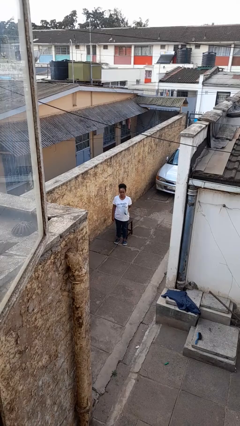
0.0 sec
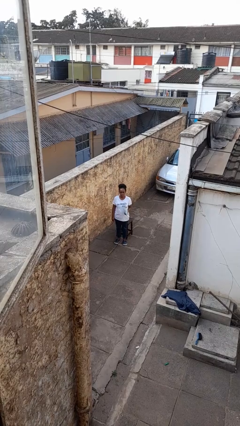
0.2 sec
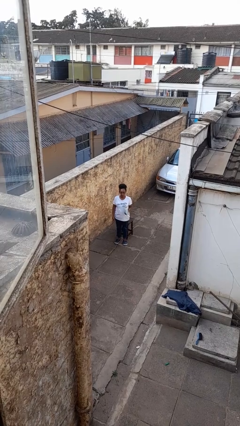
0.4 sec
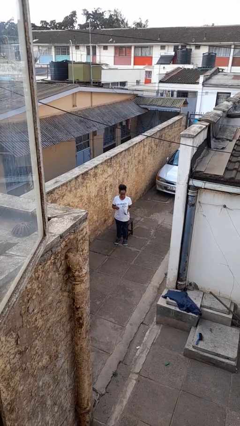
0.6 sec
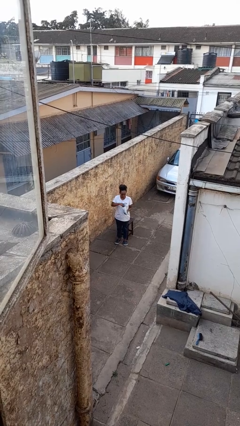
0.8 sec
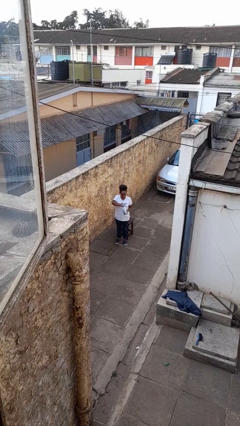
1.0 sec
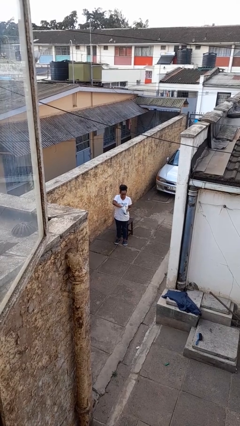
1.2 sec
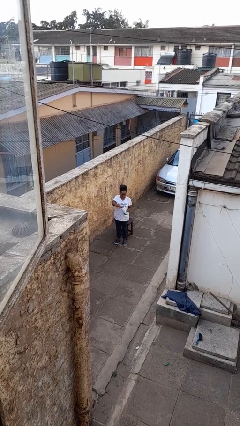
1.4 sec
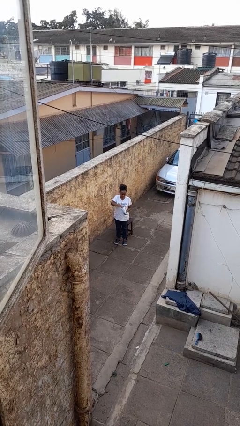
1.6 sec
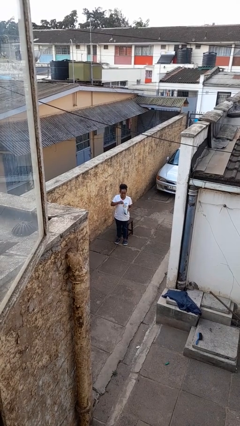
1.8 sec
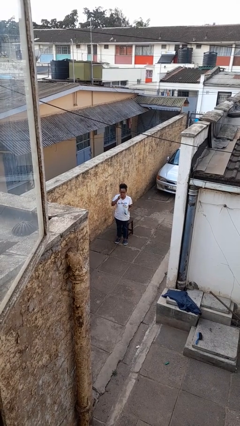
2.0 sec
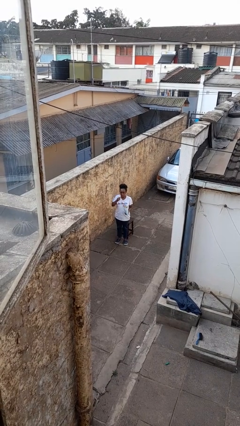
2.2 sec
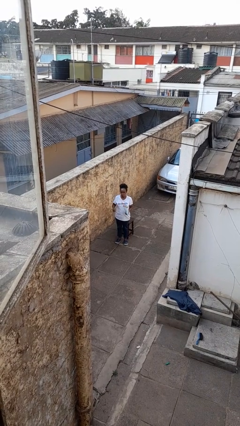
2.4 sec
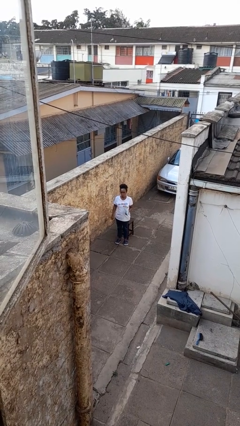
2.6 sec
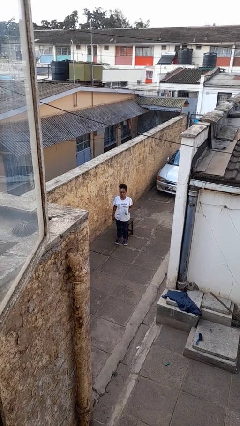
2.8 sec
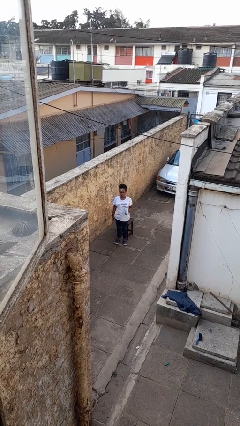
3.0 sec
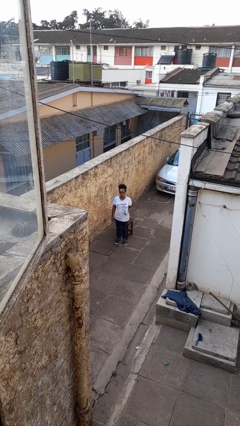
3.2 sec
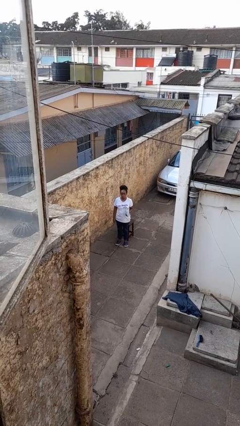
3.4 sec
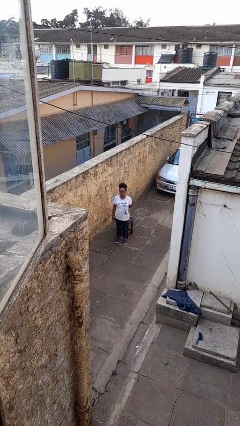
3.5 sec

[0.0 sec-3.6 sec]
person eats snack from bag

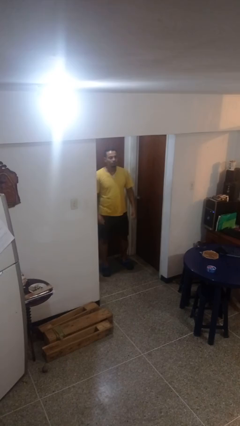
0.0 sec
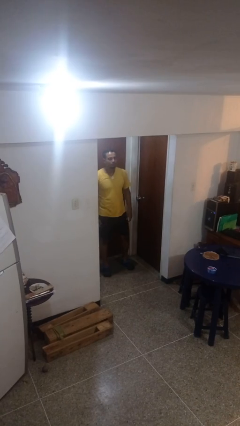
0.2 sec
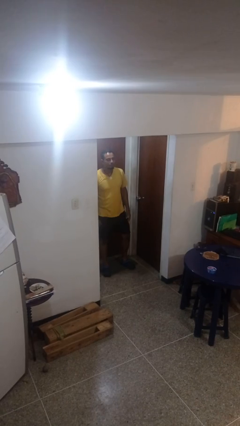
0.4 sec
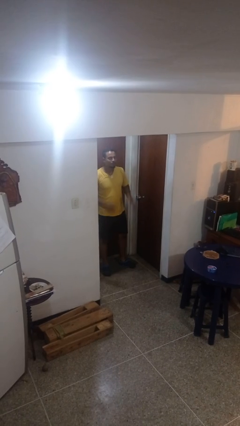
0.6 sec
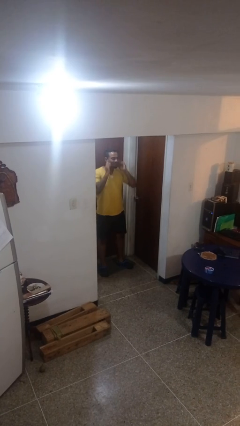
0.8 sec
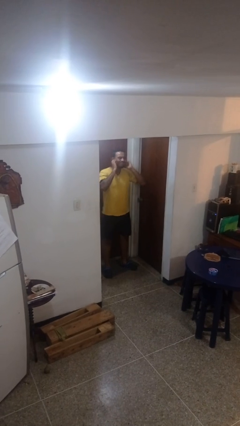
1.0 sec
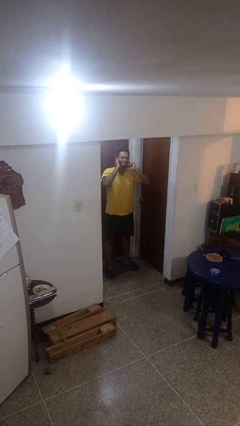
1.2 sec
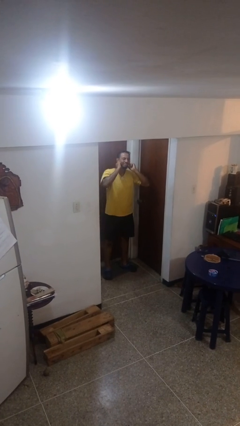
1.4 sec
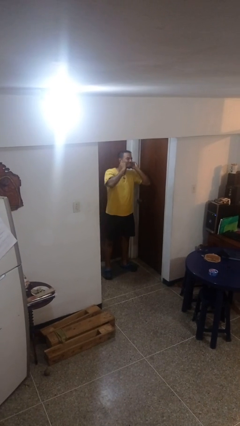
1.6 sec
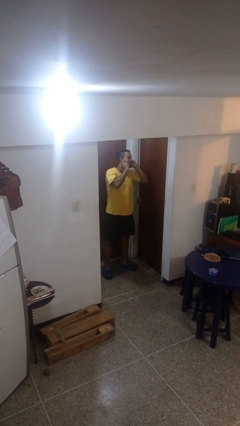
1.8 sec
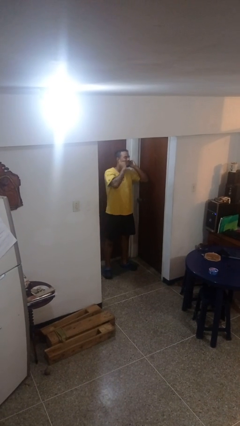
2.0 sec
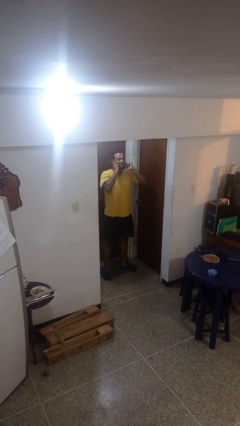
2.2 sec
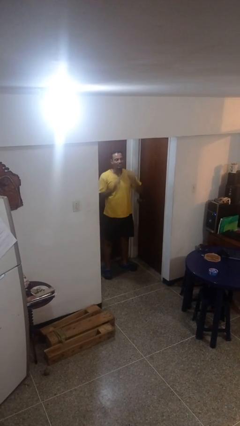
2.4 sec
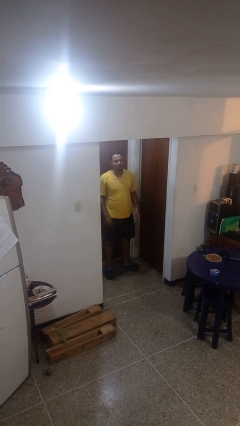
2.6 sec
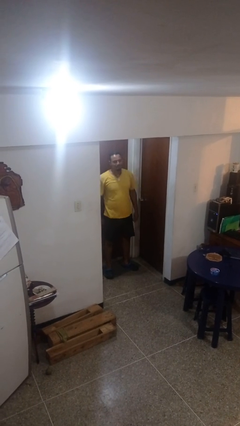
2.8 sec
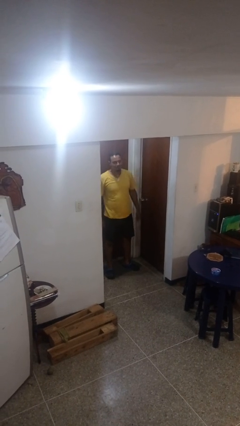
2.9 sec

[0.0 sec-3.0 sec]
person puts fingers in ear

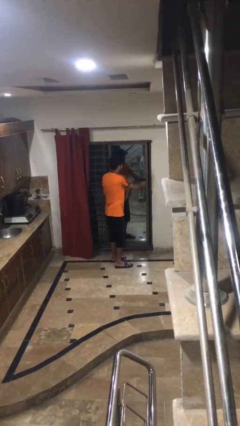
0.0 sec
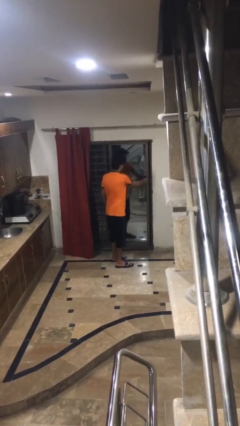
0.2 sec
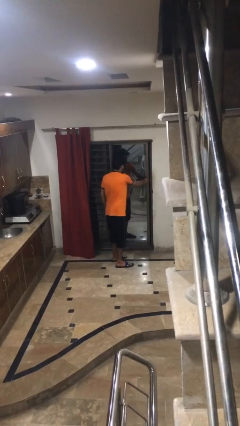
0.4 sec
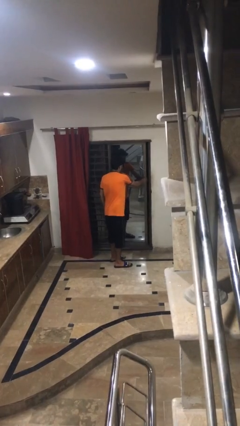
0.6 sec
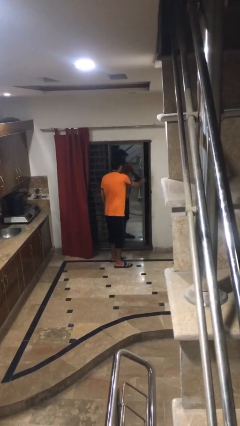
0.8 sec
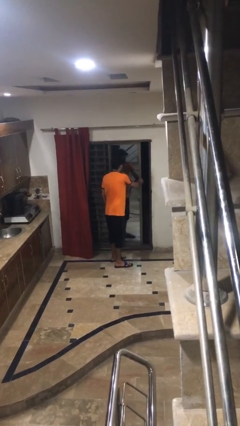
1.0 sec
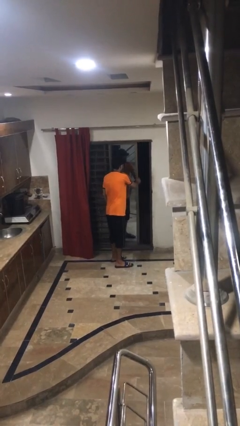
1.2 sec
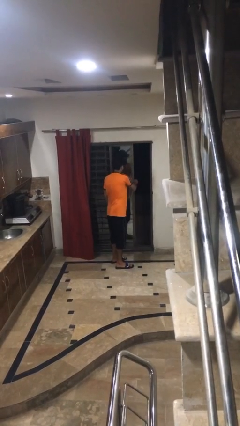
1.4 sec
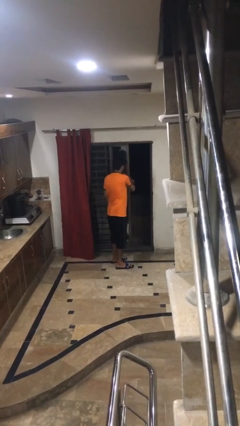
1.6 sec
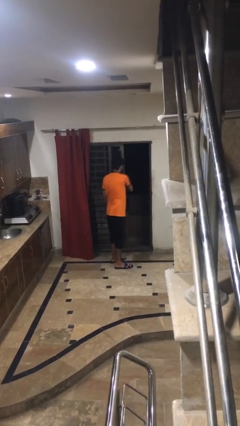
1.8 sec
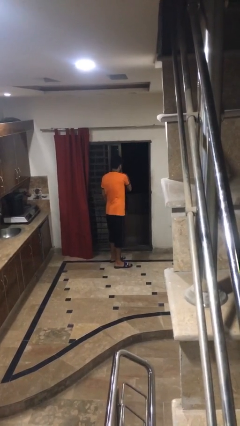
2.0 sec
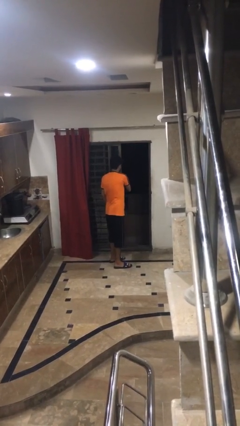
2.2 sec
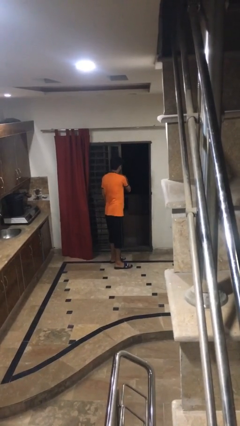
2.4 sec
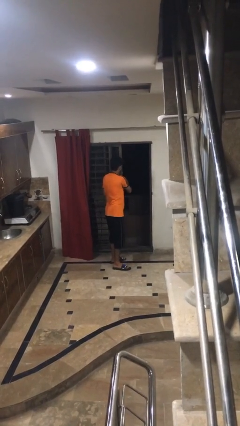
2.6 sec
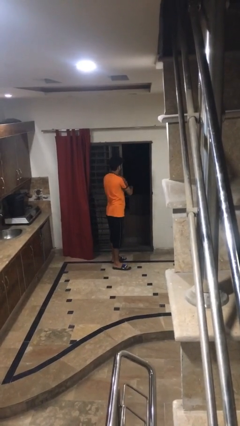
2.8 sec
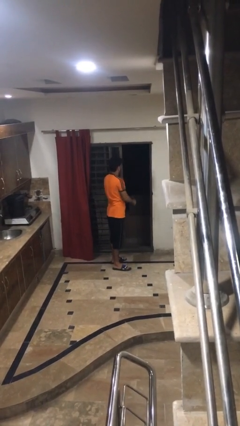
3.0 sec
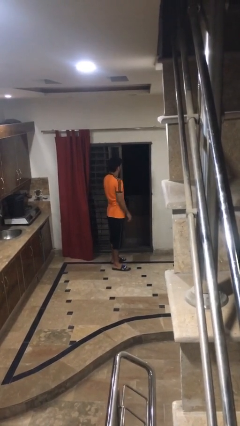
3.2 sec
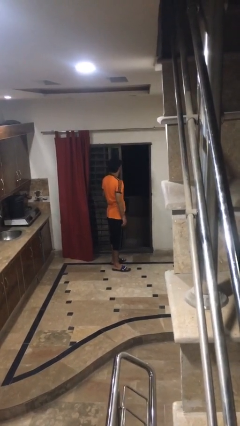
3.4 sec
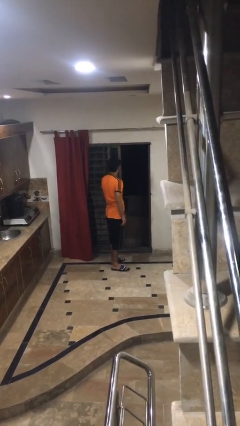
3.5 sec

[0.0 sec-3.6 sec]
person opens sliding door

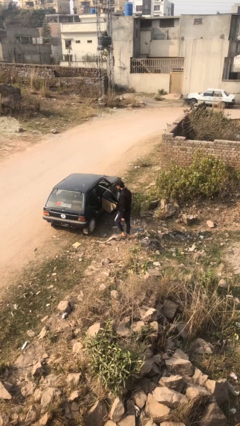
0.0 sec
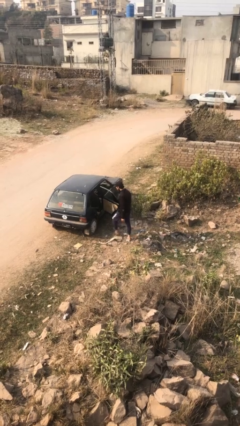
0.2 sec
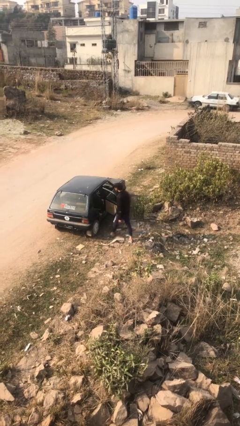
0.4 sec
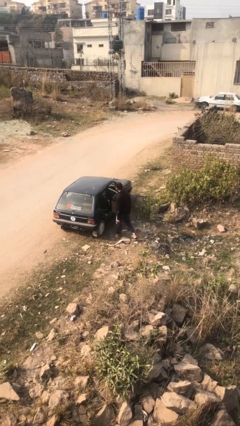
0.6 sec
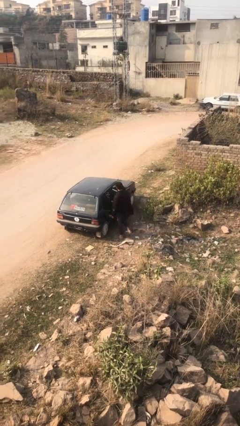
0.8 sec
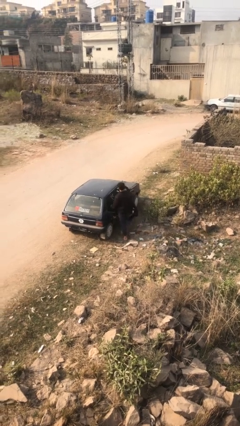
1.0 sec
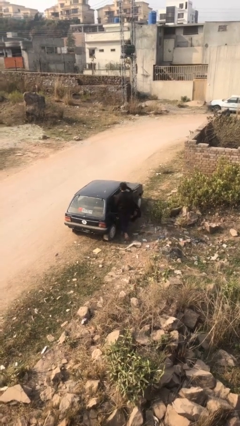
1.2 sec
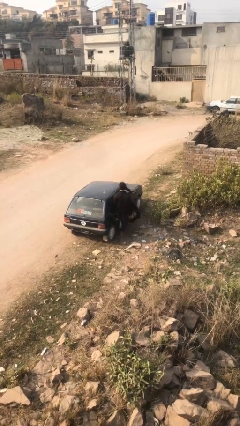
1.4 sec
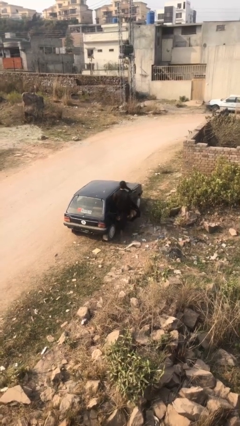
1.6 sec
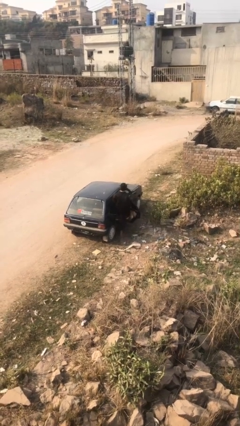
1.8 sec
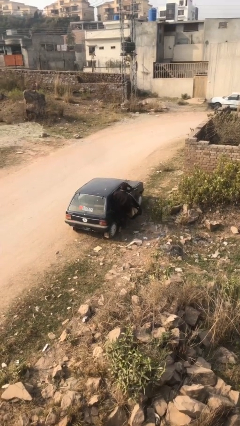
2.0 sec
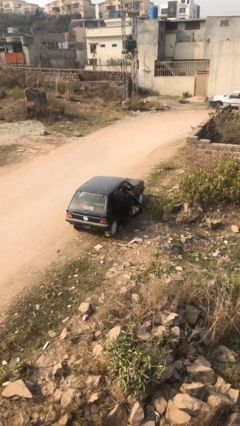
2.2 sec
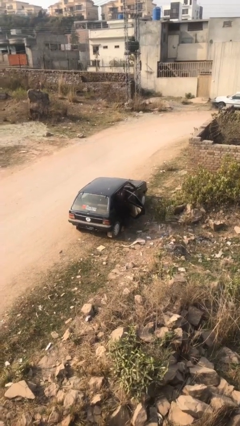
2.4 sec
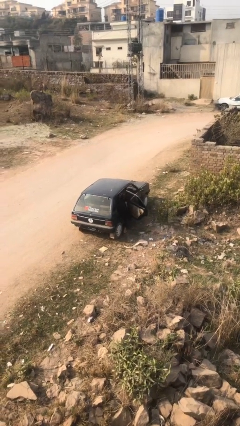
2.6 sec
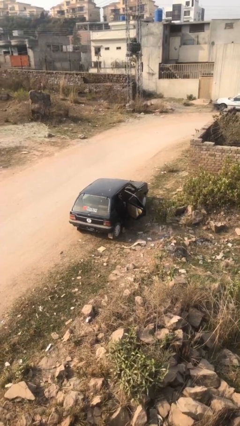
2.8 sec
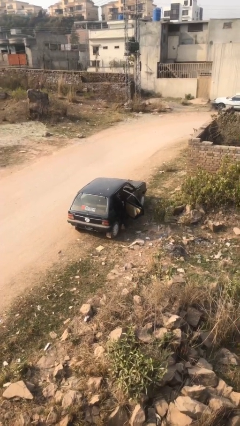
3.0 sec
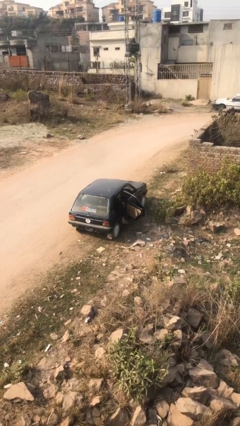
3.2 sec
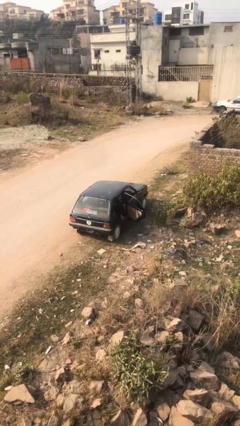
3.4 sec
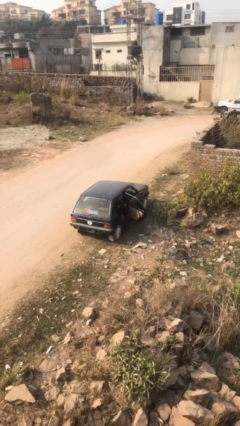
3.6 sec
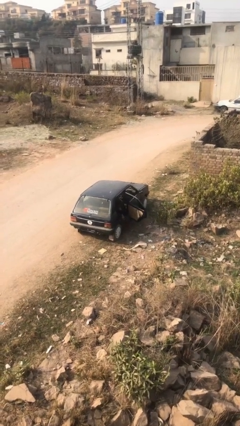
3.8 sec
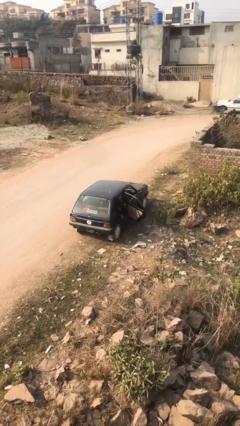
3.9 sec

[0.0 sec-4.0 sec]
person enters car

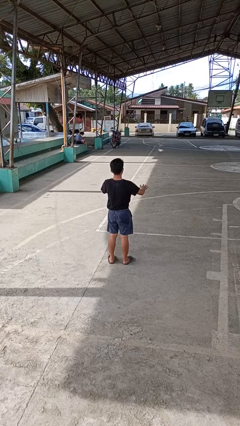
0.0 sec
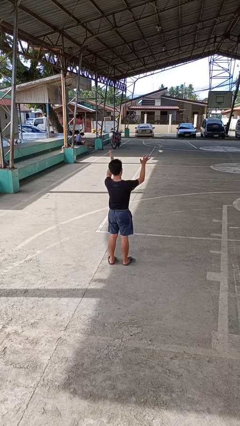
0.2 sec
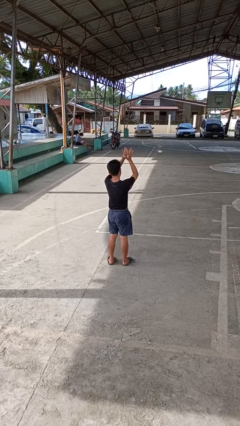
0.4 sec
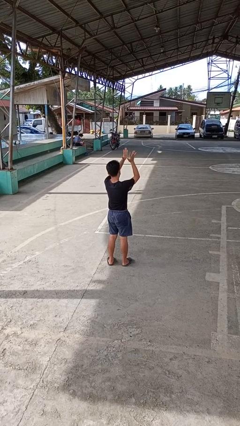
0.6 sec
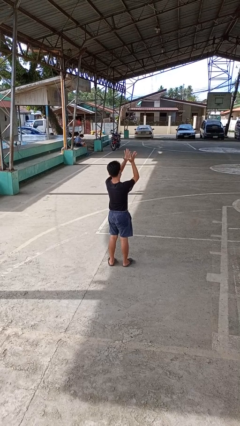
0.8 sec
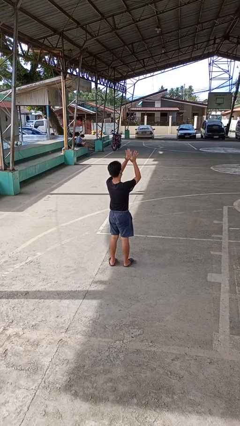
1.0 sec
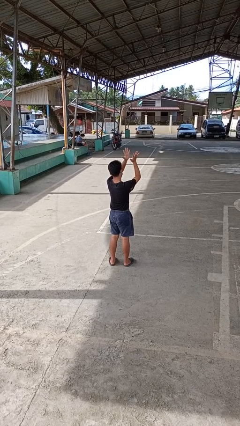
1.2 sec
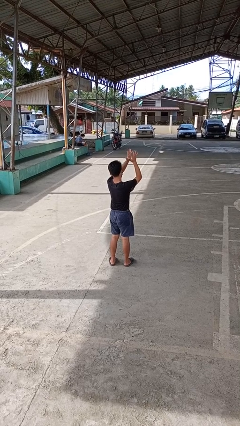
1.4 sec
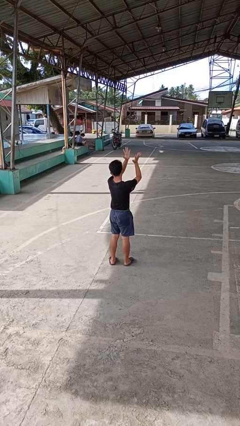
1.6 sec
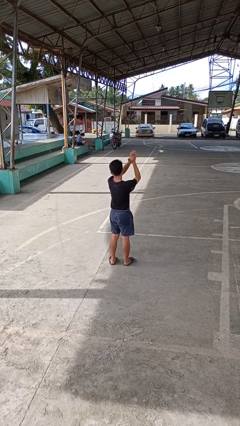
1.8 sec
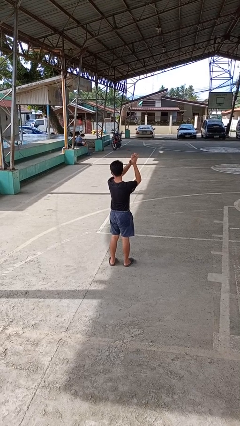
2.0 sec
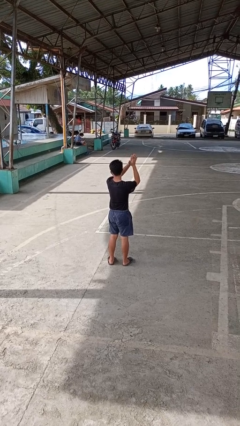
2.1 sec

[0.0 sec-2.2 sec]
person claps hands

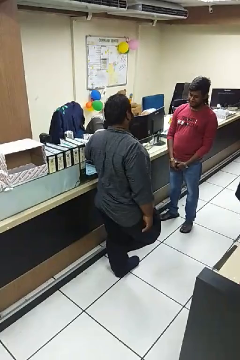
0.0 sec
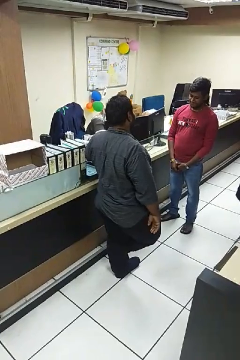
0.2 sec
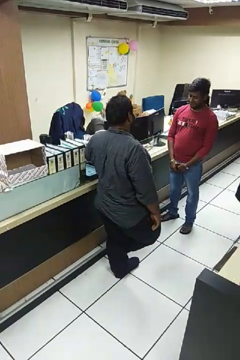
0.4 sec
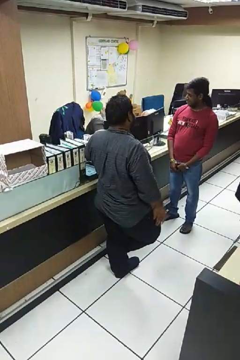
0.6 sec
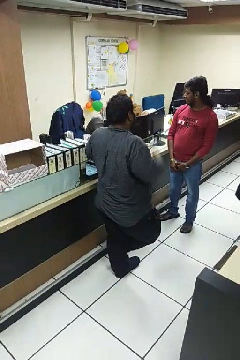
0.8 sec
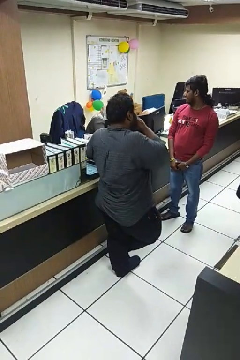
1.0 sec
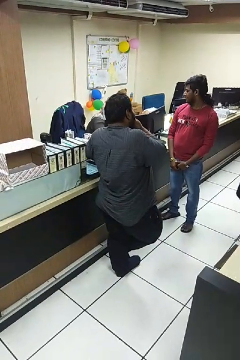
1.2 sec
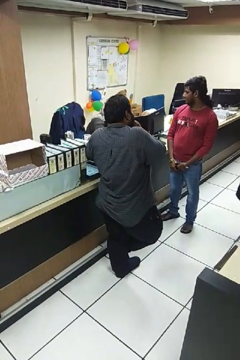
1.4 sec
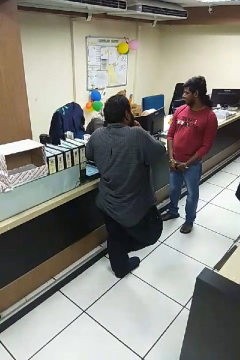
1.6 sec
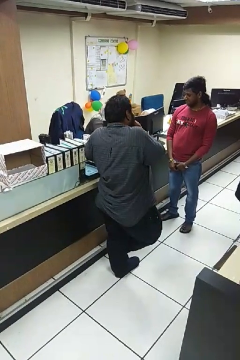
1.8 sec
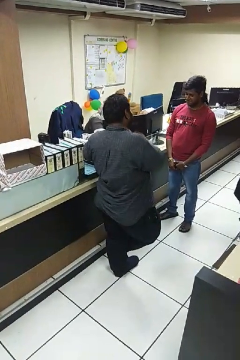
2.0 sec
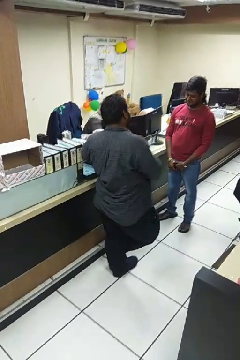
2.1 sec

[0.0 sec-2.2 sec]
person laughs with person
